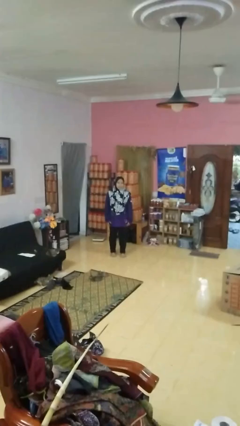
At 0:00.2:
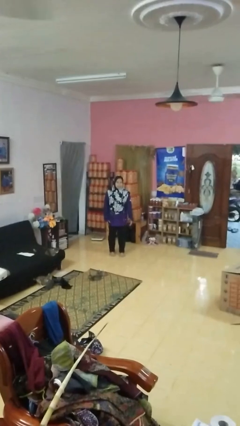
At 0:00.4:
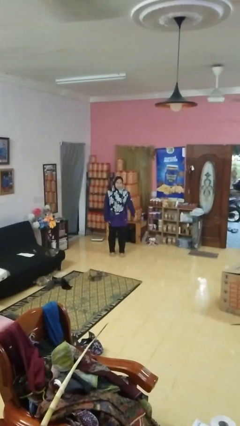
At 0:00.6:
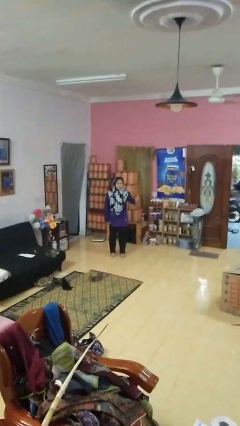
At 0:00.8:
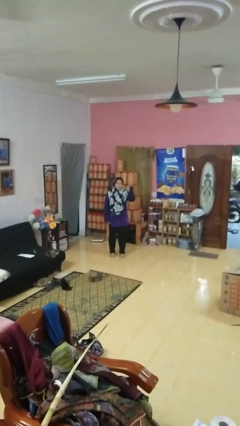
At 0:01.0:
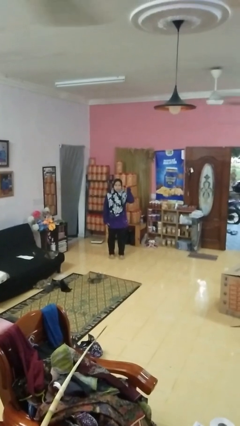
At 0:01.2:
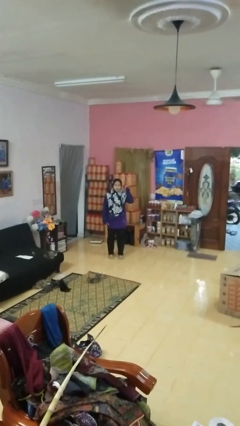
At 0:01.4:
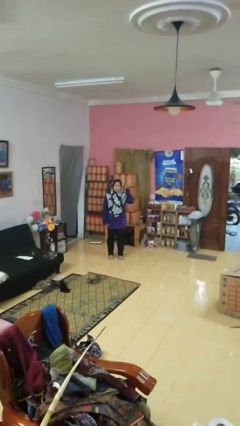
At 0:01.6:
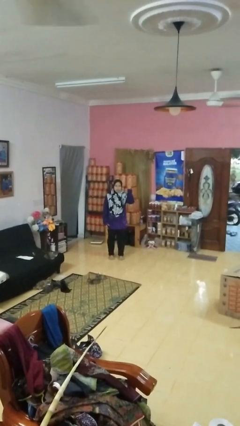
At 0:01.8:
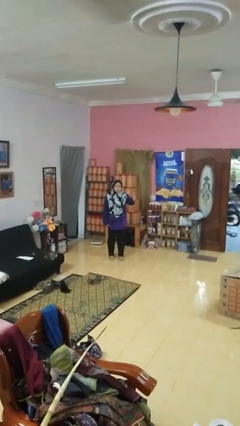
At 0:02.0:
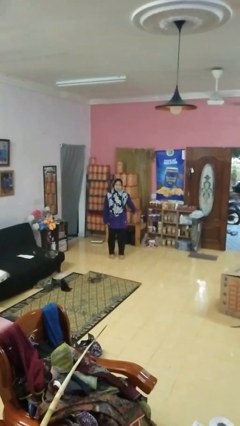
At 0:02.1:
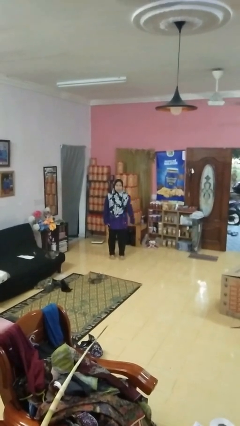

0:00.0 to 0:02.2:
person gestures behind me

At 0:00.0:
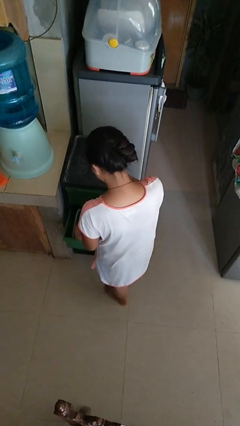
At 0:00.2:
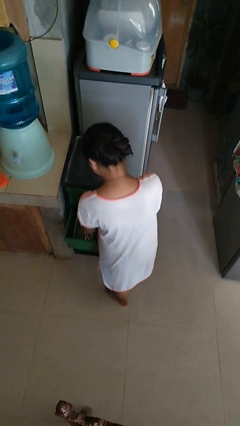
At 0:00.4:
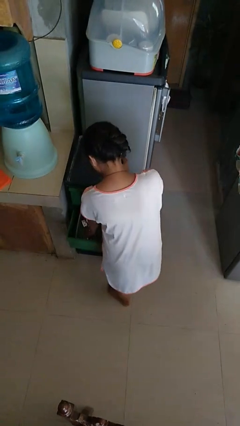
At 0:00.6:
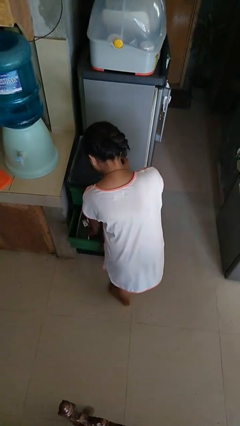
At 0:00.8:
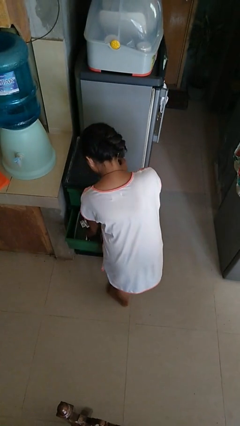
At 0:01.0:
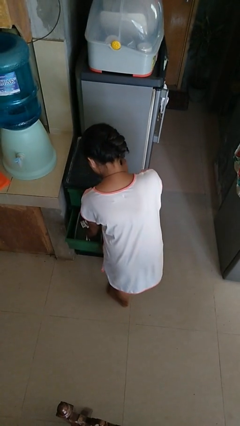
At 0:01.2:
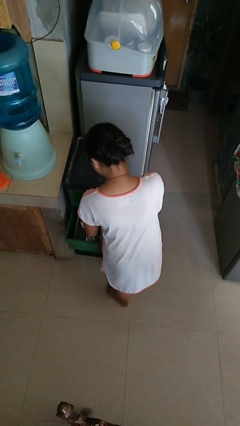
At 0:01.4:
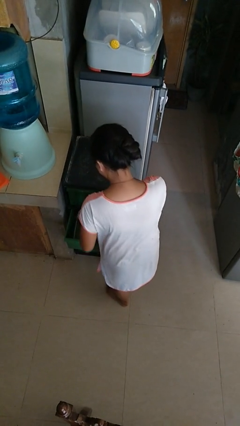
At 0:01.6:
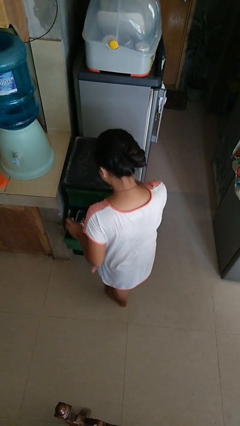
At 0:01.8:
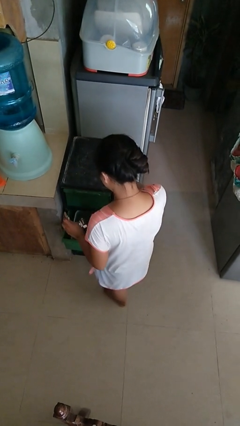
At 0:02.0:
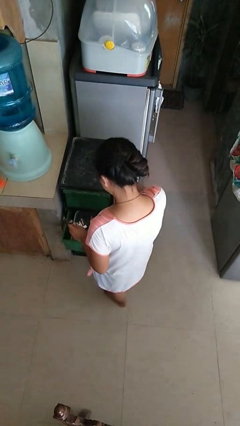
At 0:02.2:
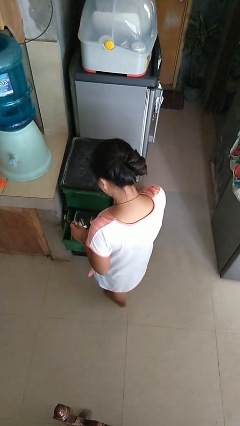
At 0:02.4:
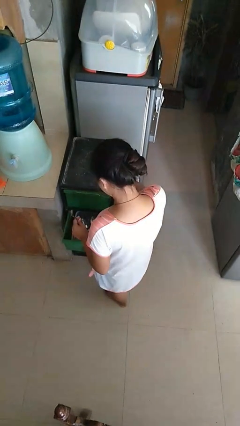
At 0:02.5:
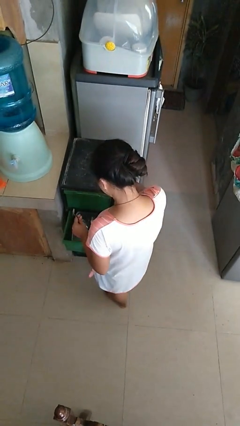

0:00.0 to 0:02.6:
person takes object from kitchen drawer

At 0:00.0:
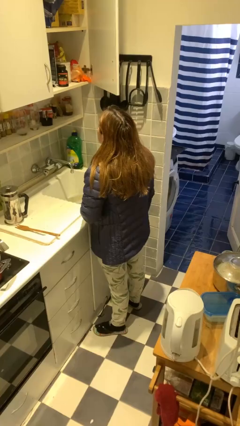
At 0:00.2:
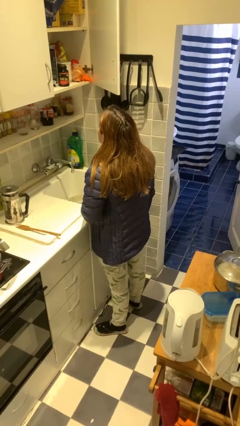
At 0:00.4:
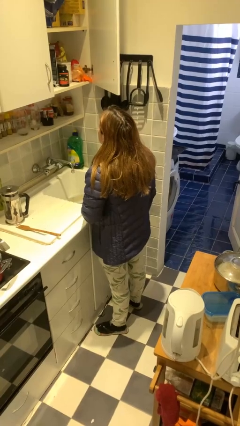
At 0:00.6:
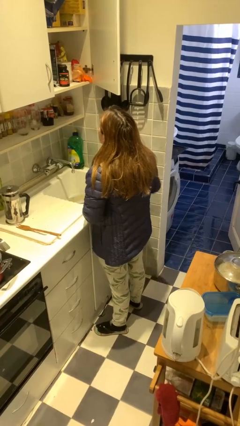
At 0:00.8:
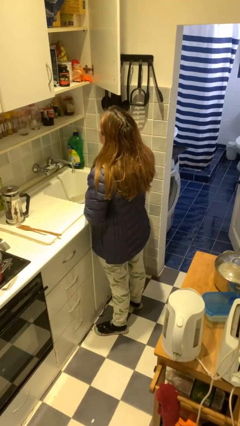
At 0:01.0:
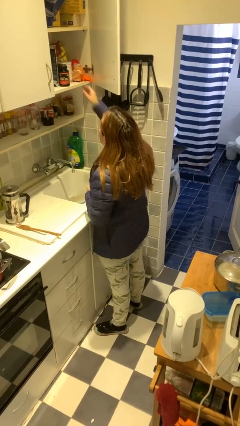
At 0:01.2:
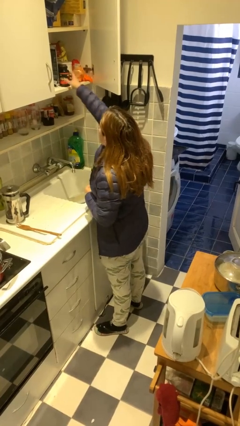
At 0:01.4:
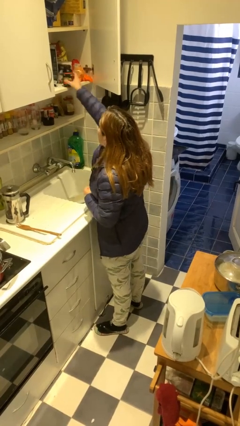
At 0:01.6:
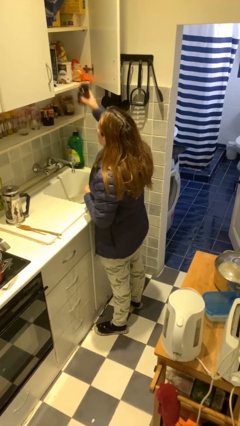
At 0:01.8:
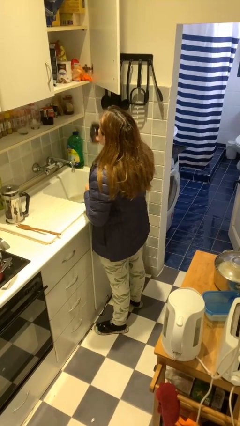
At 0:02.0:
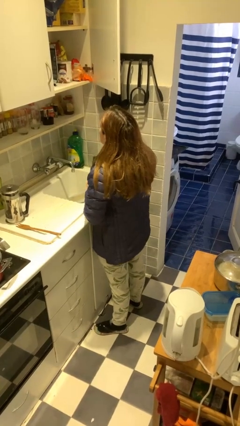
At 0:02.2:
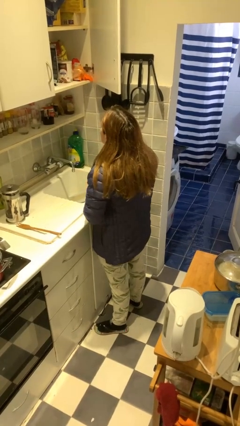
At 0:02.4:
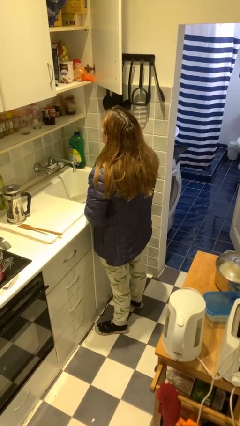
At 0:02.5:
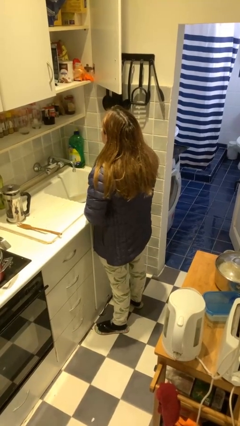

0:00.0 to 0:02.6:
person takes object from cabinet

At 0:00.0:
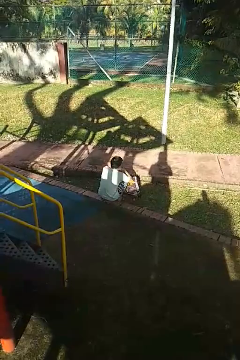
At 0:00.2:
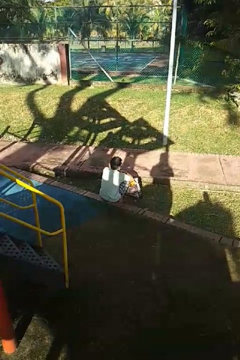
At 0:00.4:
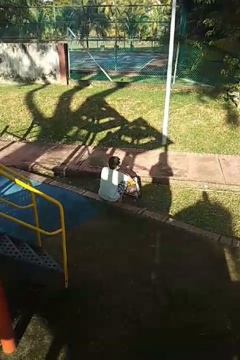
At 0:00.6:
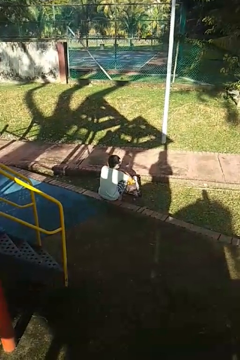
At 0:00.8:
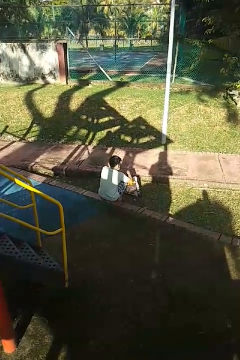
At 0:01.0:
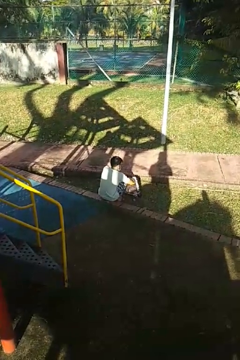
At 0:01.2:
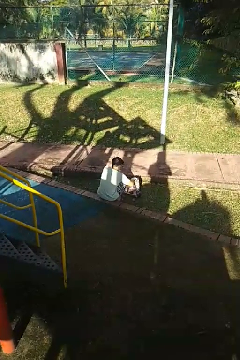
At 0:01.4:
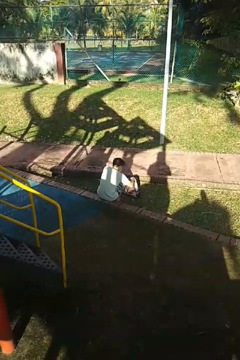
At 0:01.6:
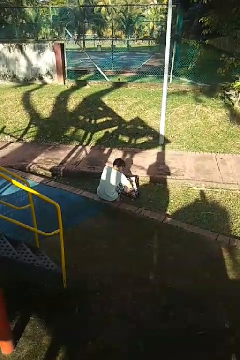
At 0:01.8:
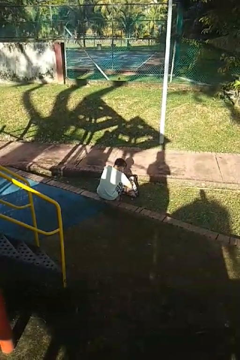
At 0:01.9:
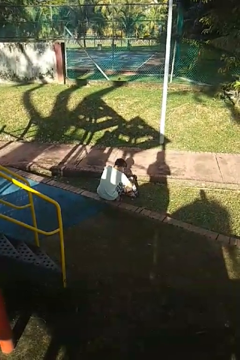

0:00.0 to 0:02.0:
person searches in bag

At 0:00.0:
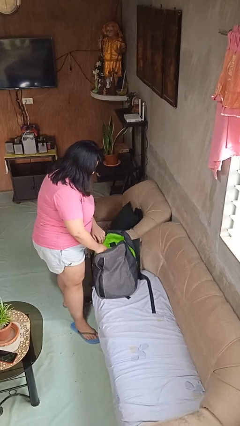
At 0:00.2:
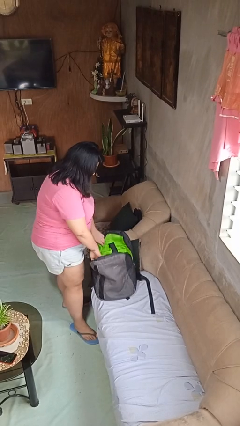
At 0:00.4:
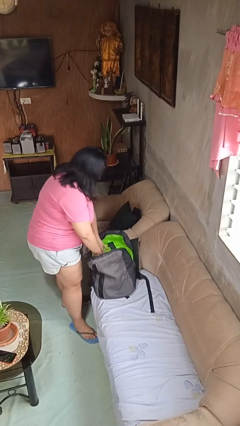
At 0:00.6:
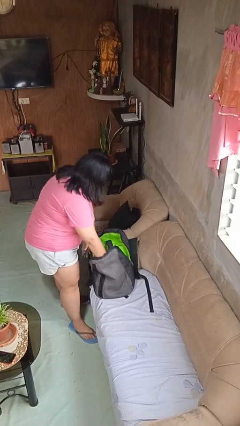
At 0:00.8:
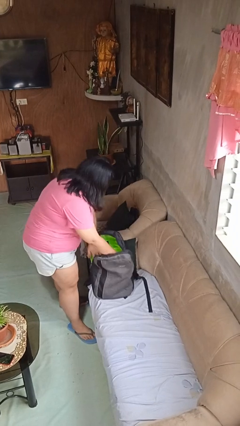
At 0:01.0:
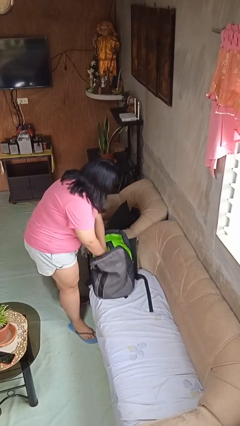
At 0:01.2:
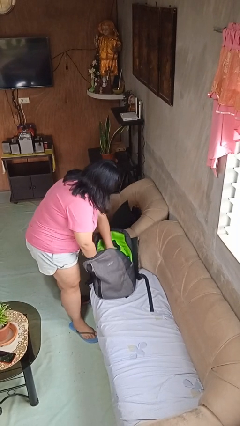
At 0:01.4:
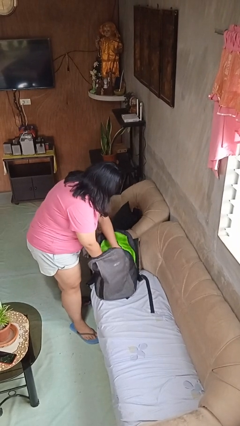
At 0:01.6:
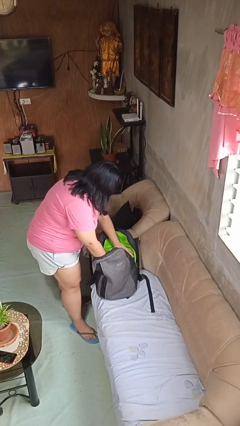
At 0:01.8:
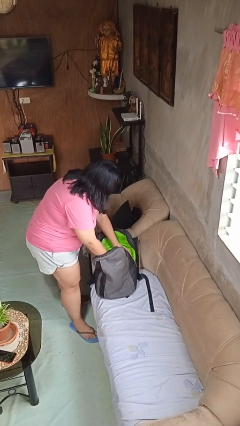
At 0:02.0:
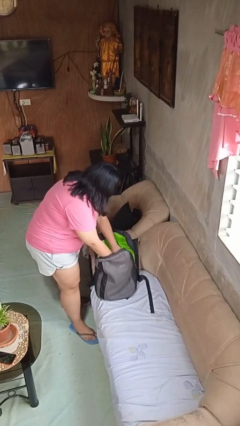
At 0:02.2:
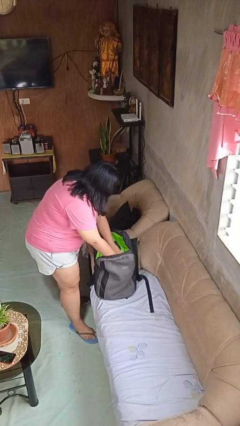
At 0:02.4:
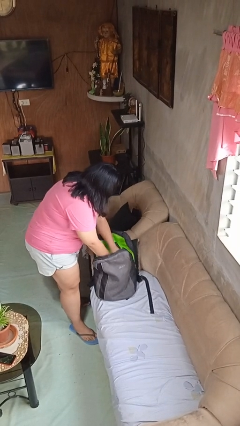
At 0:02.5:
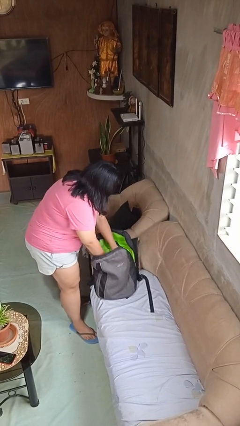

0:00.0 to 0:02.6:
person searches in backpack

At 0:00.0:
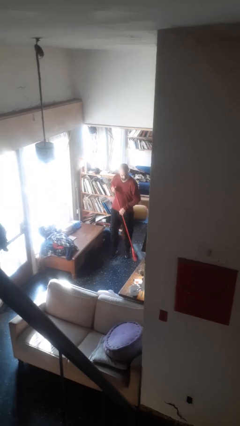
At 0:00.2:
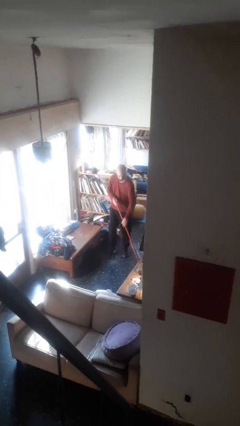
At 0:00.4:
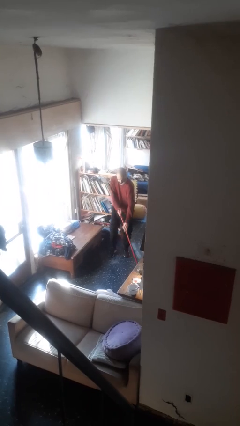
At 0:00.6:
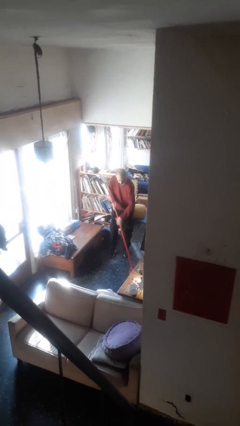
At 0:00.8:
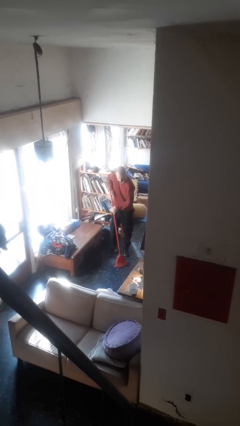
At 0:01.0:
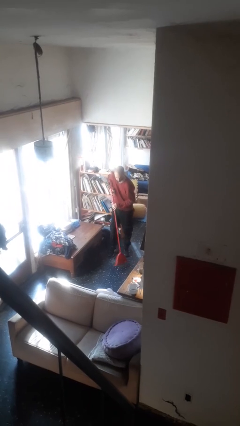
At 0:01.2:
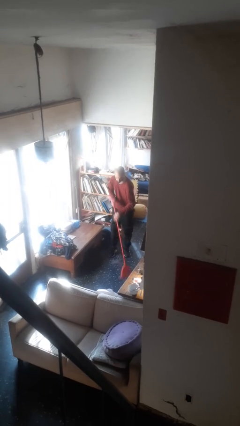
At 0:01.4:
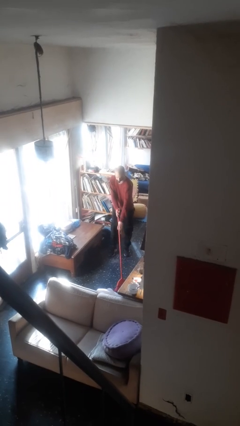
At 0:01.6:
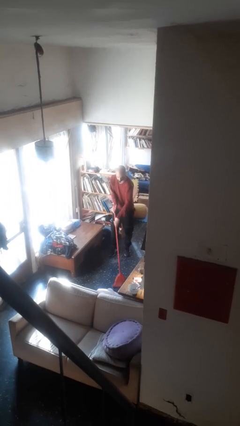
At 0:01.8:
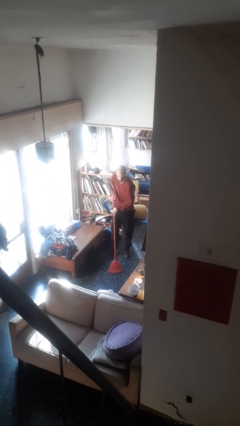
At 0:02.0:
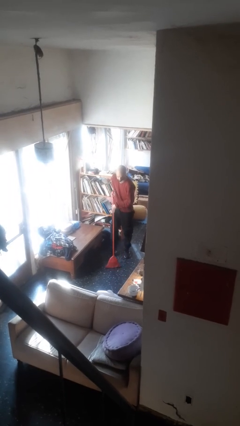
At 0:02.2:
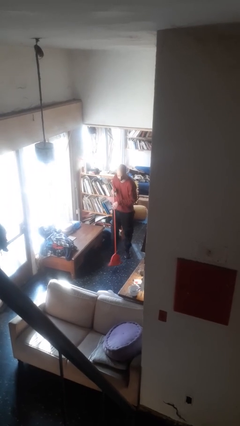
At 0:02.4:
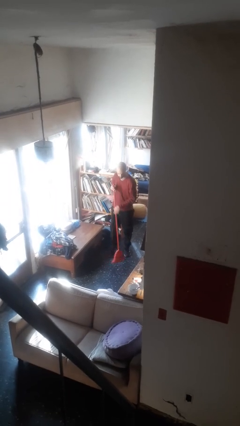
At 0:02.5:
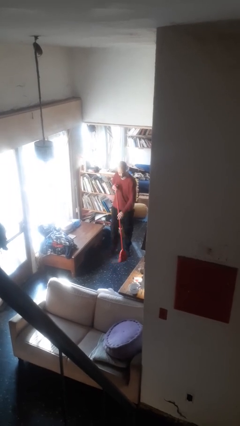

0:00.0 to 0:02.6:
person sweeps floor

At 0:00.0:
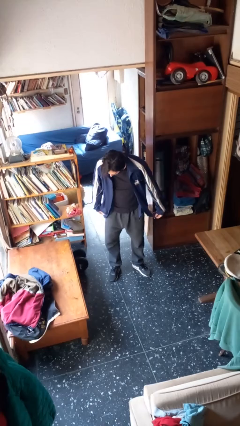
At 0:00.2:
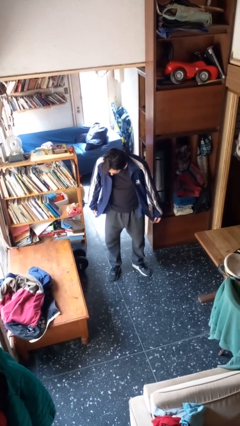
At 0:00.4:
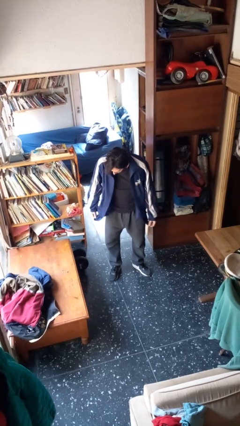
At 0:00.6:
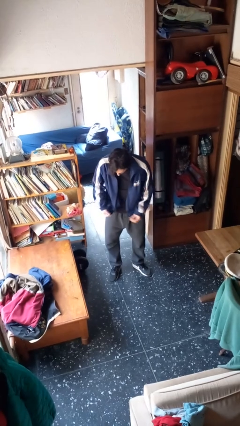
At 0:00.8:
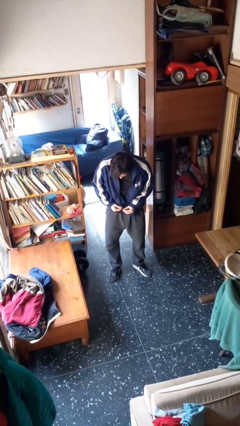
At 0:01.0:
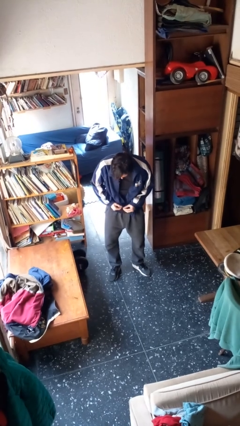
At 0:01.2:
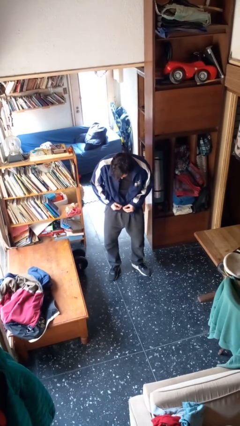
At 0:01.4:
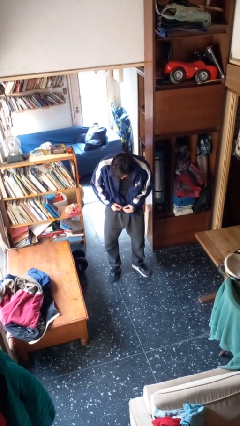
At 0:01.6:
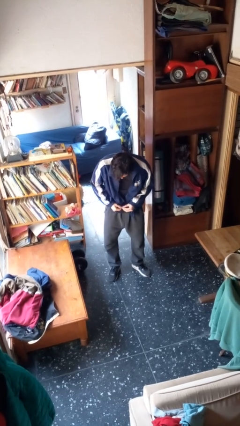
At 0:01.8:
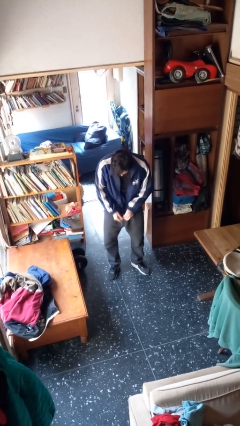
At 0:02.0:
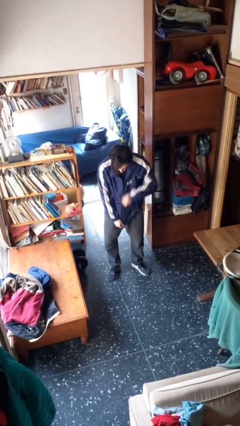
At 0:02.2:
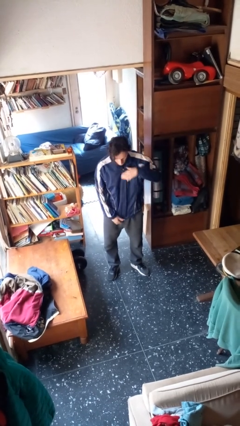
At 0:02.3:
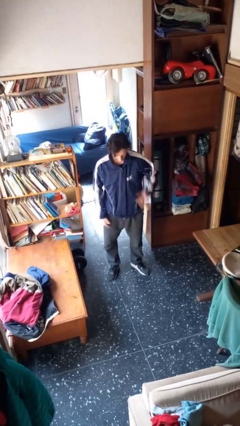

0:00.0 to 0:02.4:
person zips up jacket

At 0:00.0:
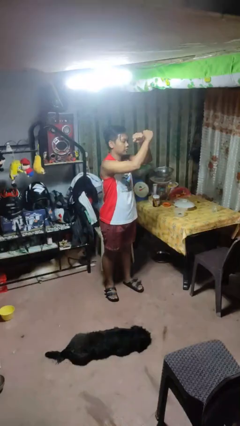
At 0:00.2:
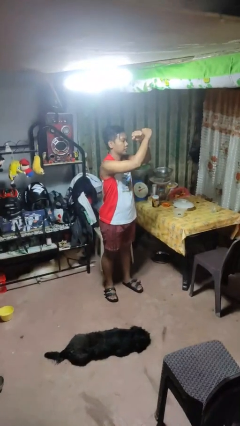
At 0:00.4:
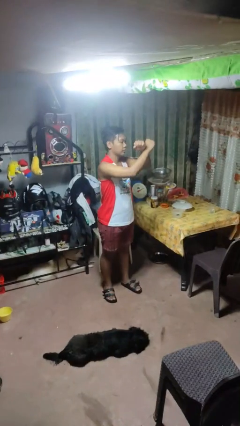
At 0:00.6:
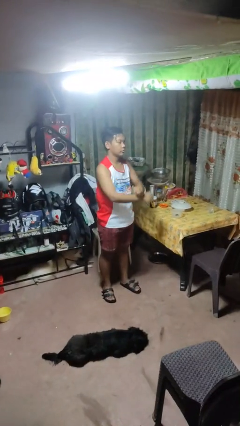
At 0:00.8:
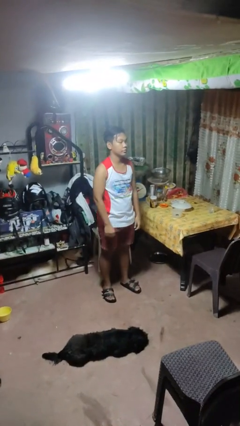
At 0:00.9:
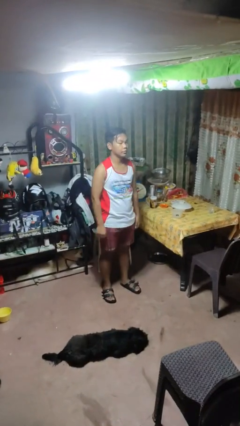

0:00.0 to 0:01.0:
person gestures arms x
